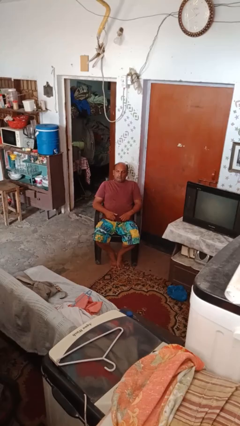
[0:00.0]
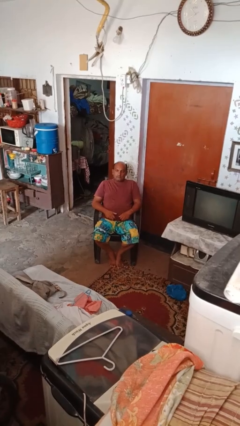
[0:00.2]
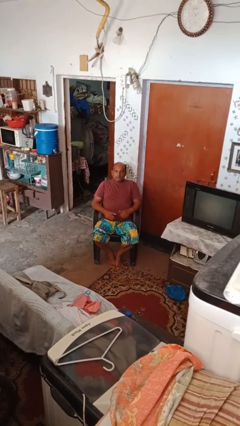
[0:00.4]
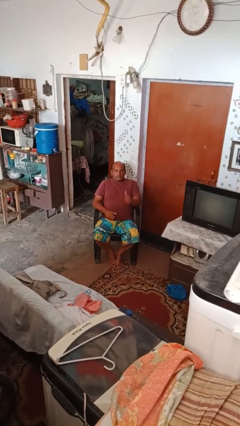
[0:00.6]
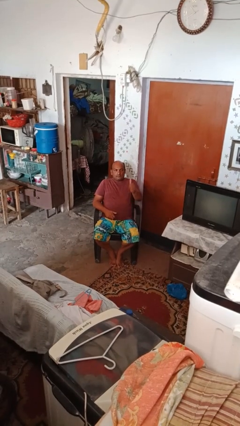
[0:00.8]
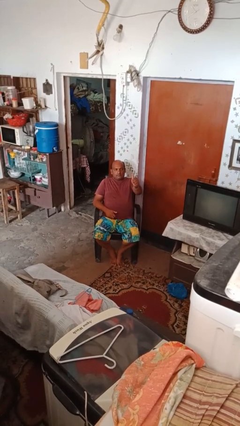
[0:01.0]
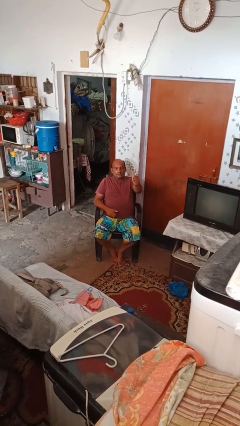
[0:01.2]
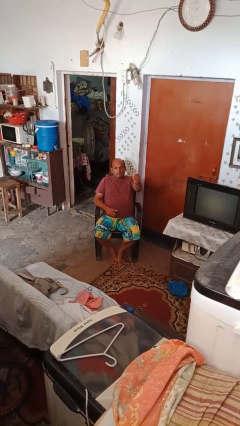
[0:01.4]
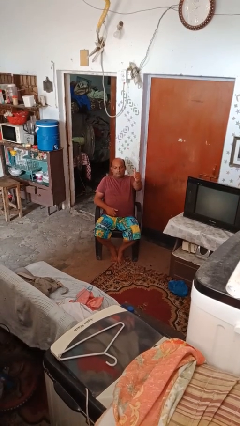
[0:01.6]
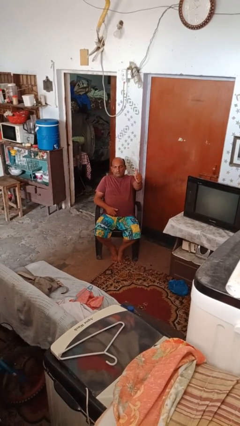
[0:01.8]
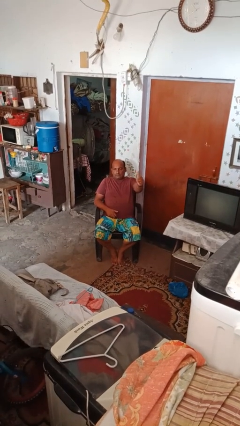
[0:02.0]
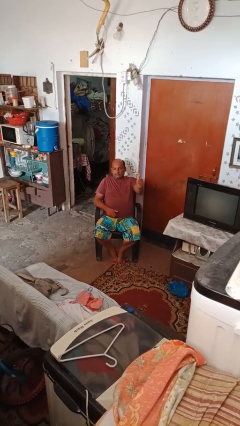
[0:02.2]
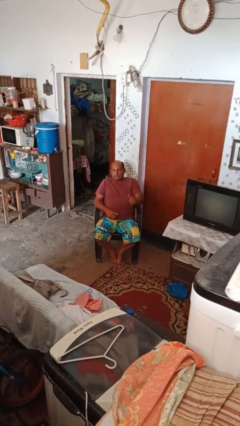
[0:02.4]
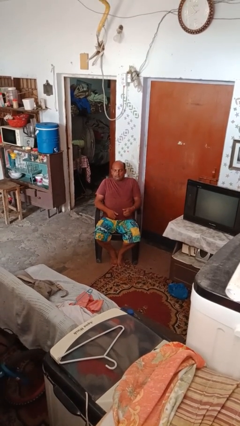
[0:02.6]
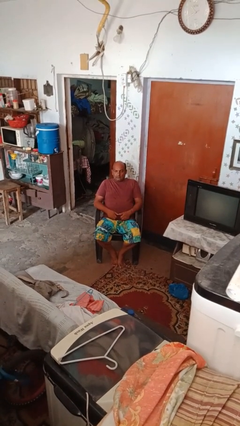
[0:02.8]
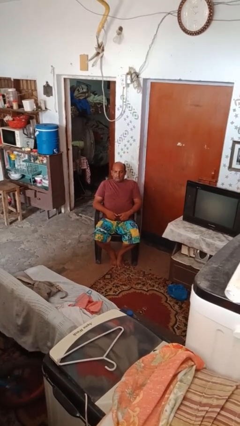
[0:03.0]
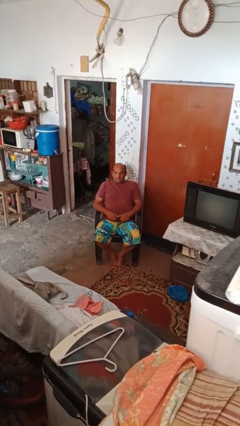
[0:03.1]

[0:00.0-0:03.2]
person gestures thumbs up

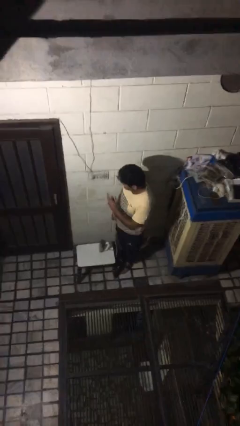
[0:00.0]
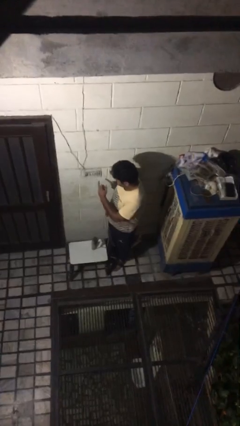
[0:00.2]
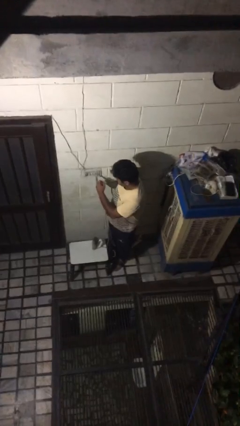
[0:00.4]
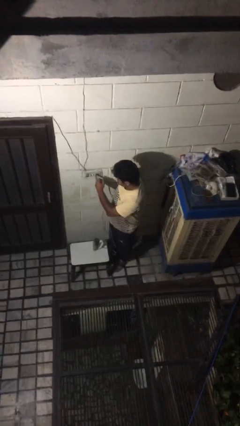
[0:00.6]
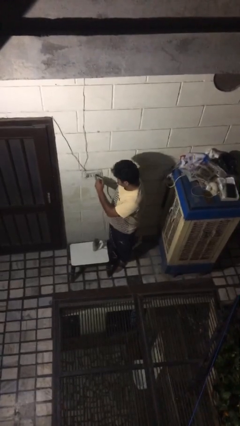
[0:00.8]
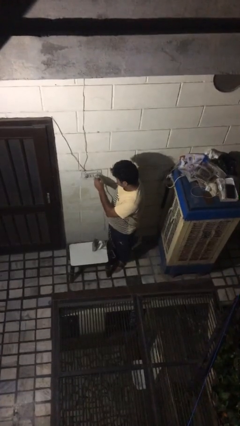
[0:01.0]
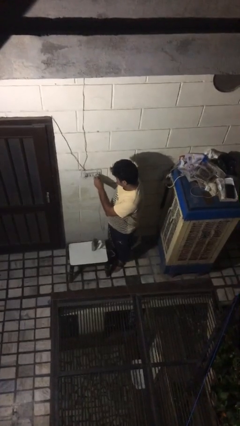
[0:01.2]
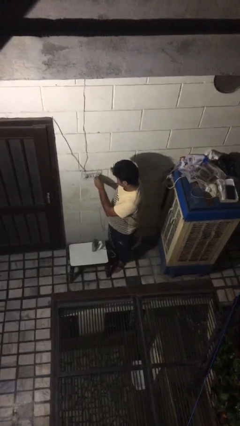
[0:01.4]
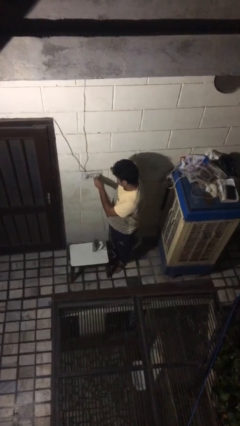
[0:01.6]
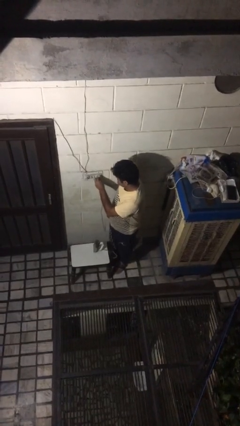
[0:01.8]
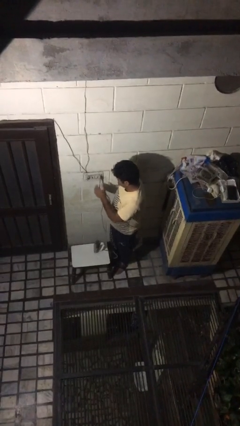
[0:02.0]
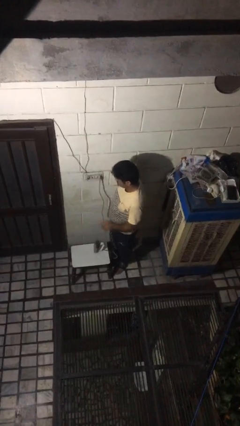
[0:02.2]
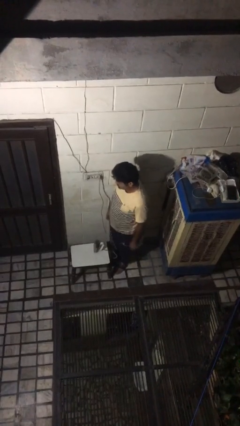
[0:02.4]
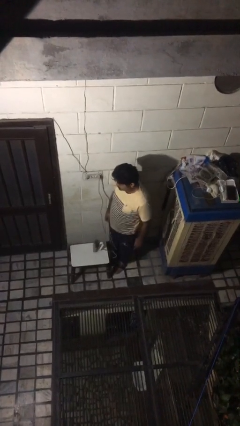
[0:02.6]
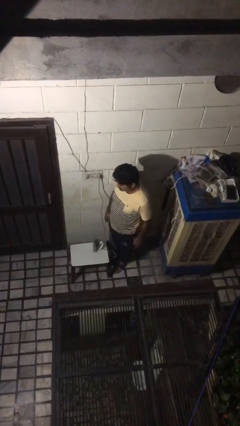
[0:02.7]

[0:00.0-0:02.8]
person plugs into electrical socket

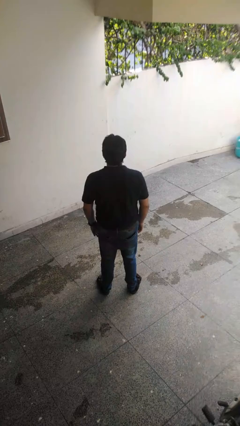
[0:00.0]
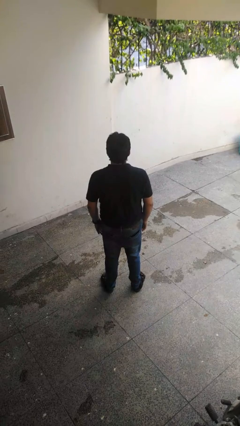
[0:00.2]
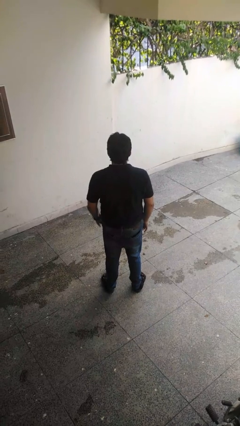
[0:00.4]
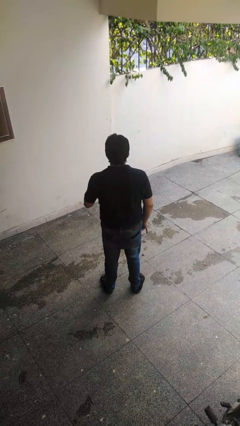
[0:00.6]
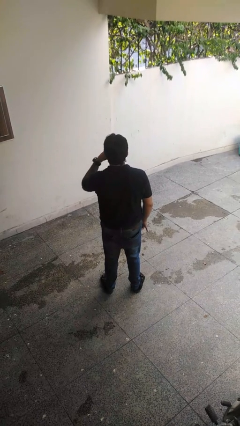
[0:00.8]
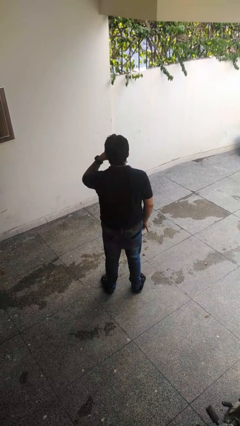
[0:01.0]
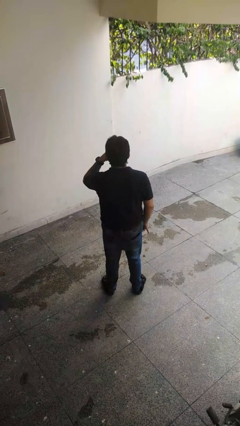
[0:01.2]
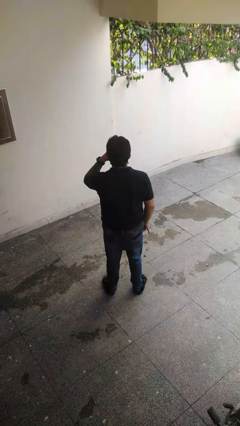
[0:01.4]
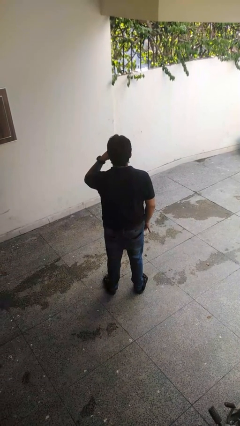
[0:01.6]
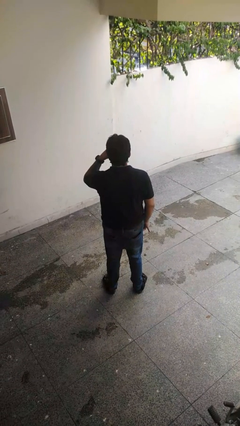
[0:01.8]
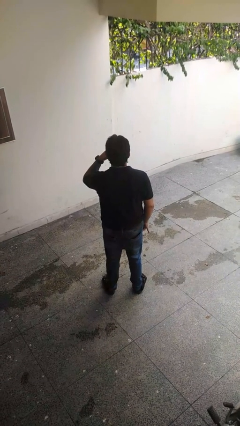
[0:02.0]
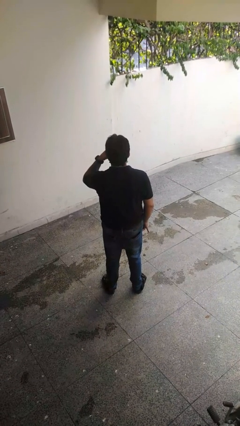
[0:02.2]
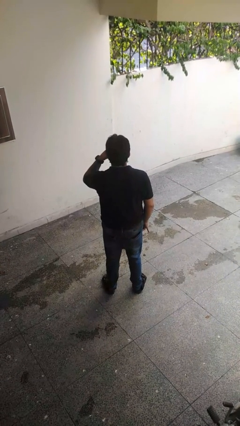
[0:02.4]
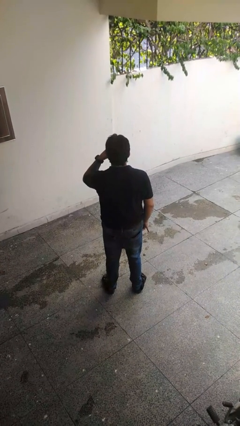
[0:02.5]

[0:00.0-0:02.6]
person gestures call me

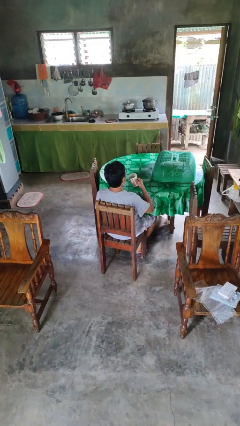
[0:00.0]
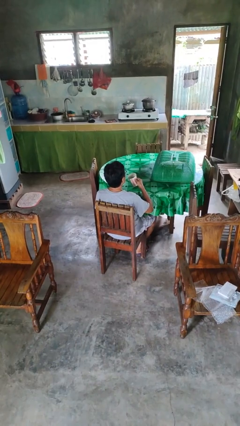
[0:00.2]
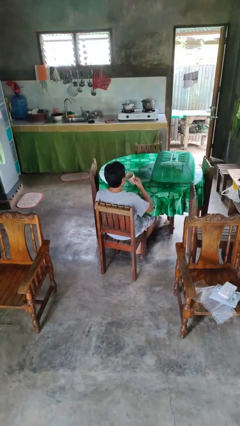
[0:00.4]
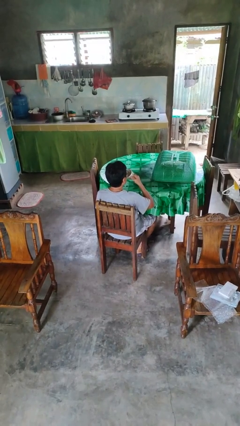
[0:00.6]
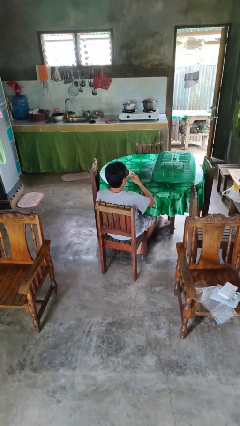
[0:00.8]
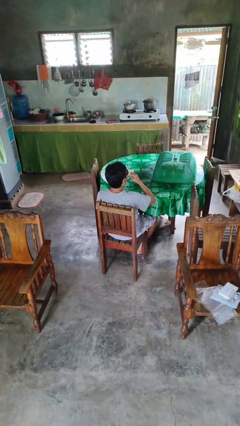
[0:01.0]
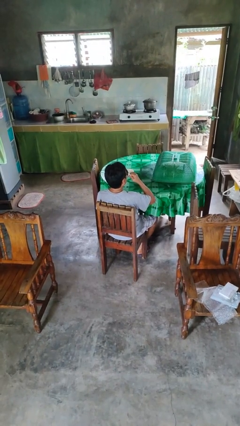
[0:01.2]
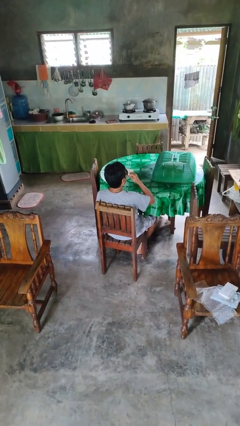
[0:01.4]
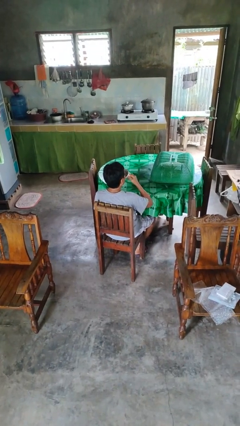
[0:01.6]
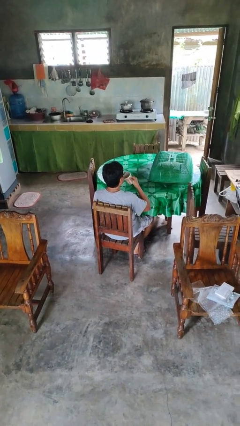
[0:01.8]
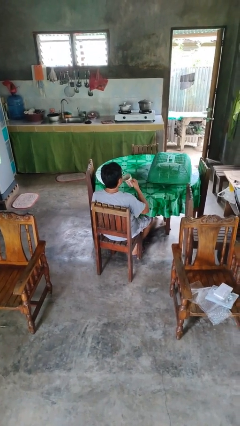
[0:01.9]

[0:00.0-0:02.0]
person drinks from mug

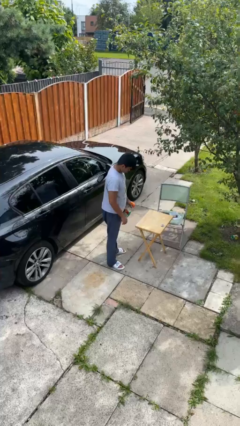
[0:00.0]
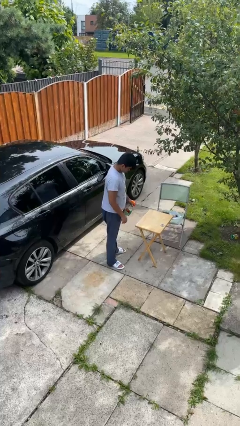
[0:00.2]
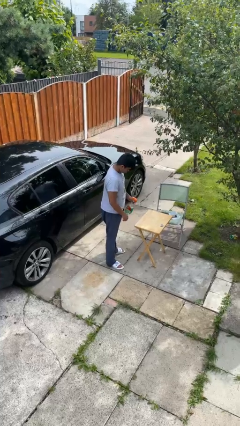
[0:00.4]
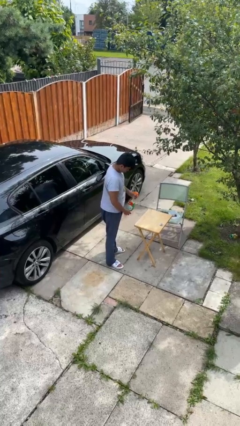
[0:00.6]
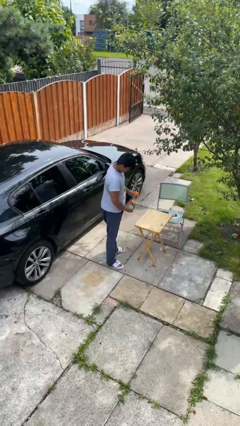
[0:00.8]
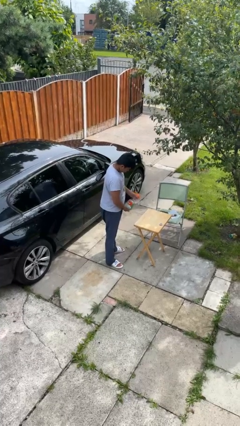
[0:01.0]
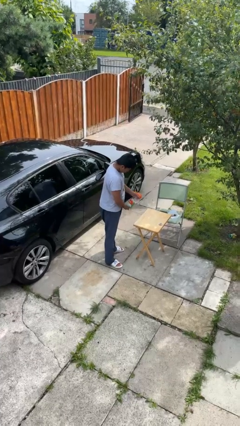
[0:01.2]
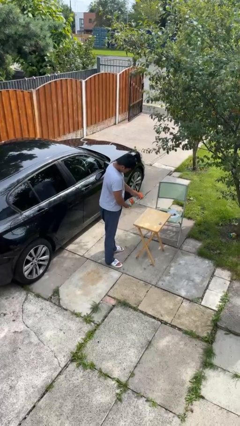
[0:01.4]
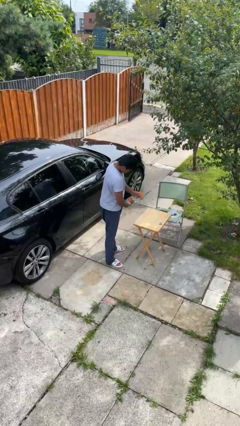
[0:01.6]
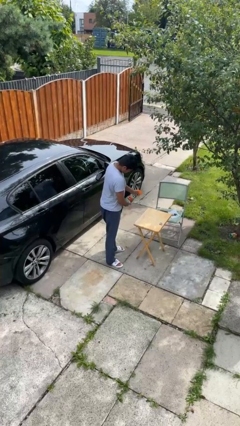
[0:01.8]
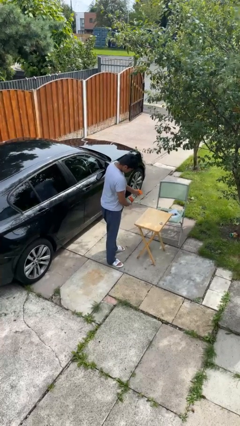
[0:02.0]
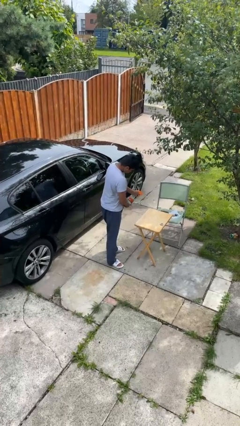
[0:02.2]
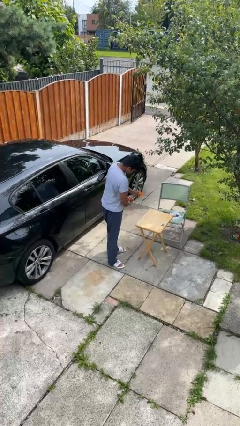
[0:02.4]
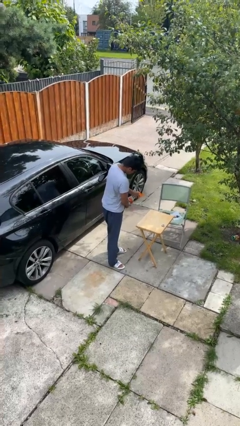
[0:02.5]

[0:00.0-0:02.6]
person sprays from bottle

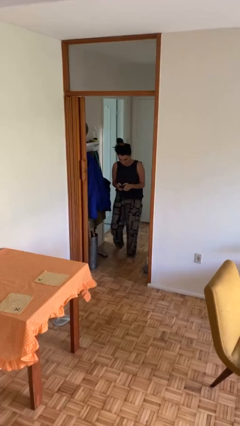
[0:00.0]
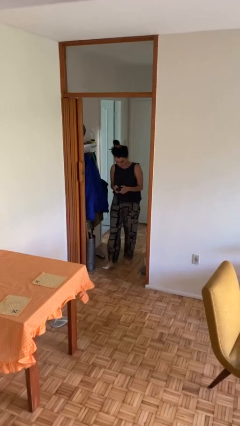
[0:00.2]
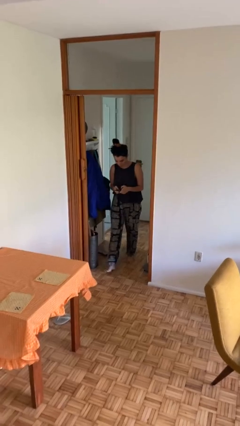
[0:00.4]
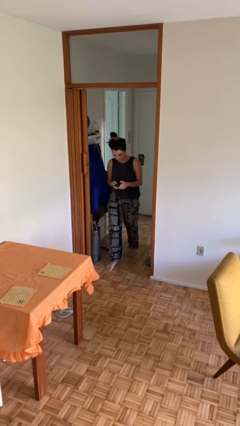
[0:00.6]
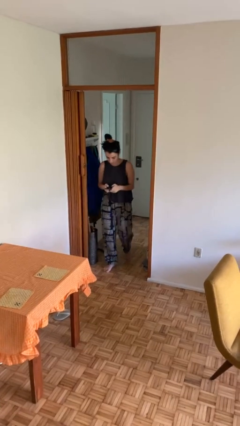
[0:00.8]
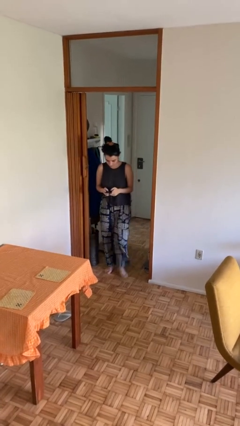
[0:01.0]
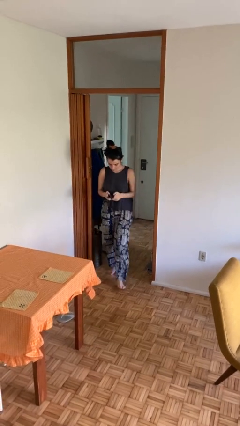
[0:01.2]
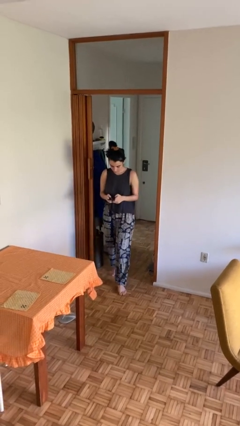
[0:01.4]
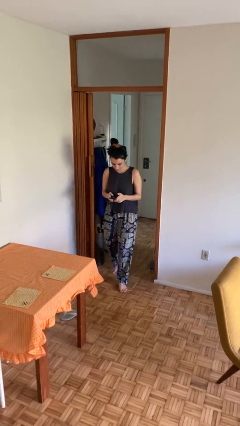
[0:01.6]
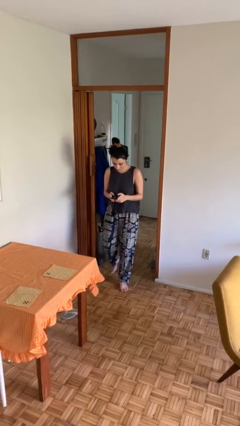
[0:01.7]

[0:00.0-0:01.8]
person enters scene through structure

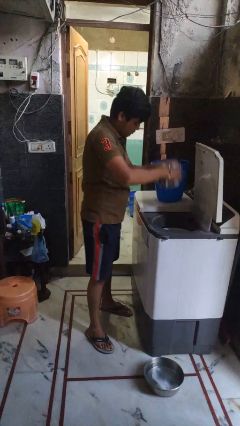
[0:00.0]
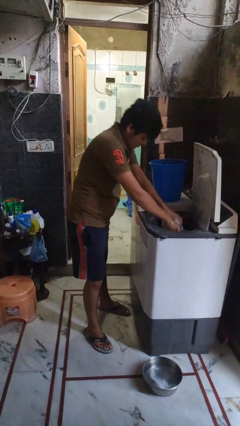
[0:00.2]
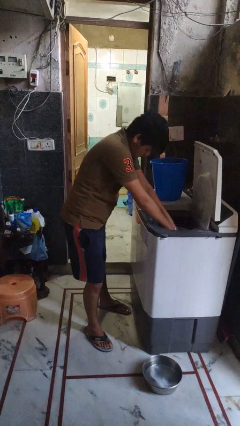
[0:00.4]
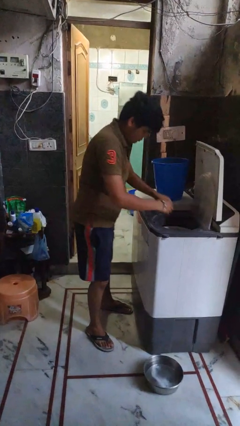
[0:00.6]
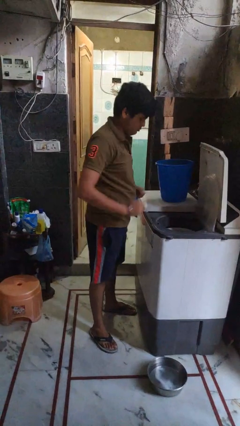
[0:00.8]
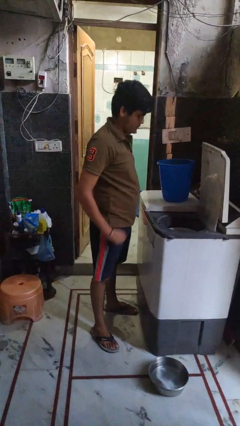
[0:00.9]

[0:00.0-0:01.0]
person loads dryer

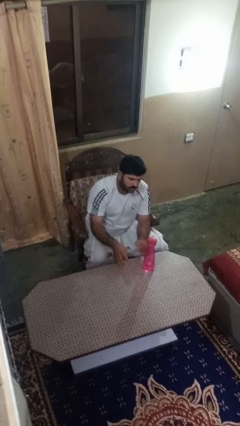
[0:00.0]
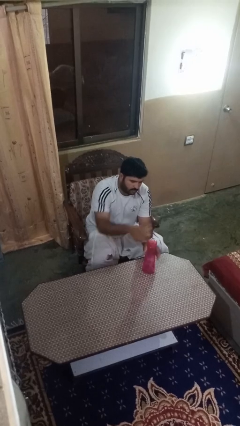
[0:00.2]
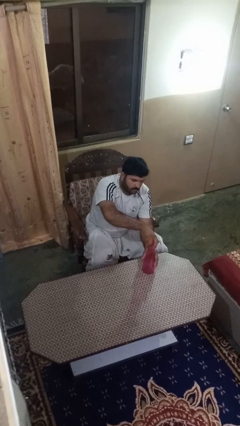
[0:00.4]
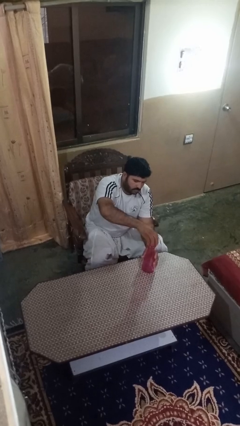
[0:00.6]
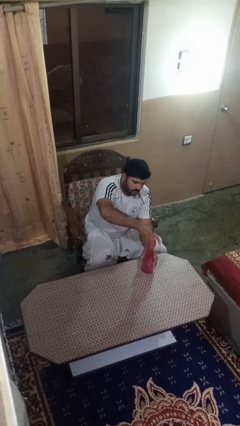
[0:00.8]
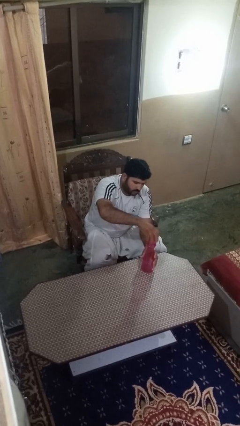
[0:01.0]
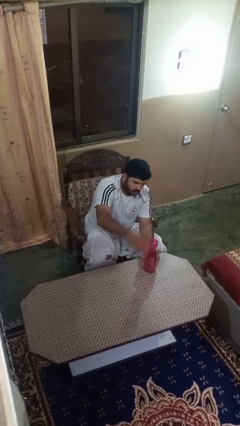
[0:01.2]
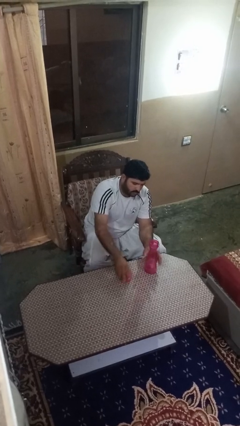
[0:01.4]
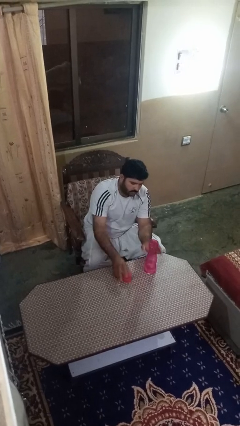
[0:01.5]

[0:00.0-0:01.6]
person unscrews lid from bottle
